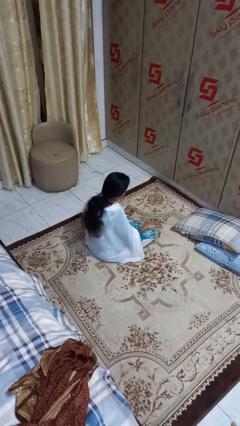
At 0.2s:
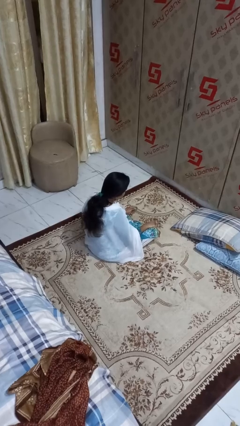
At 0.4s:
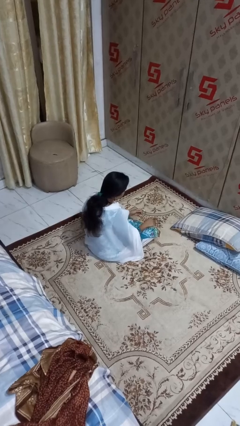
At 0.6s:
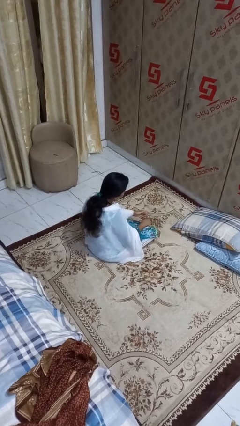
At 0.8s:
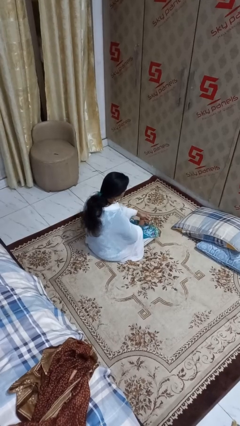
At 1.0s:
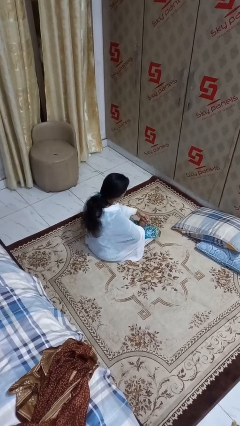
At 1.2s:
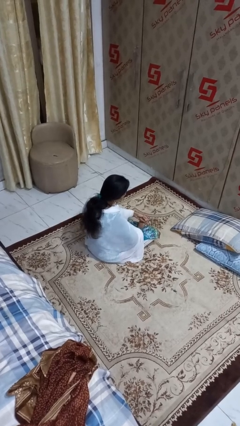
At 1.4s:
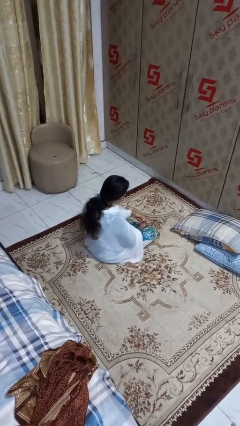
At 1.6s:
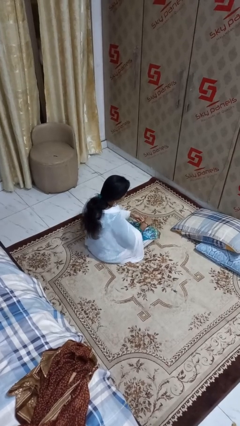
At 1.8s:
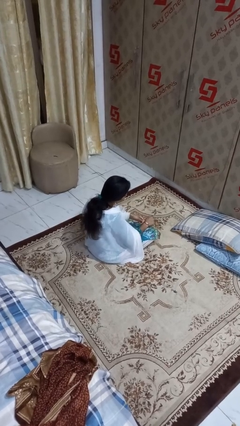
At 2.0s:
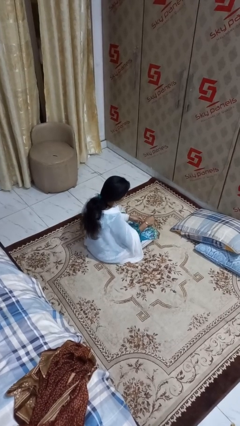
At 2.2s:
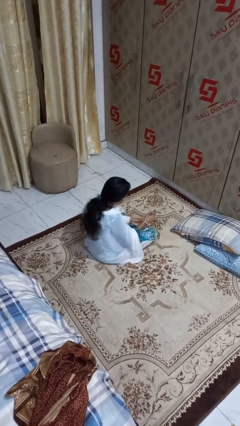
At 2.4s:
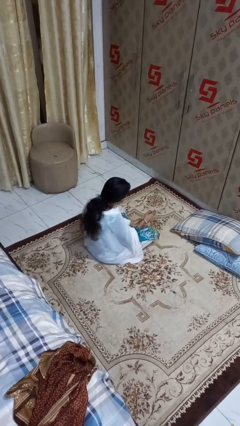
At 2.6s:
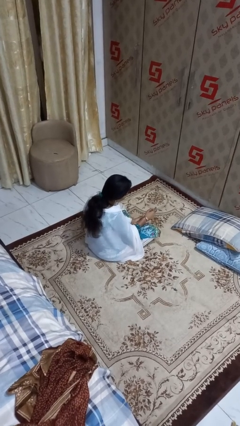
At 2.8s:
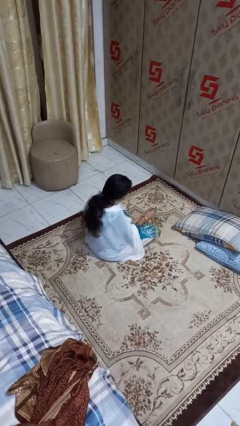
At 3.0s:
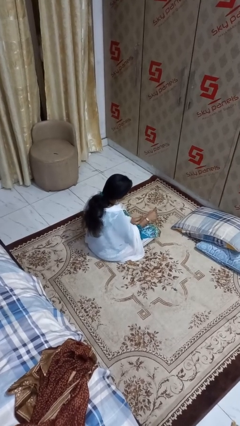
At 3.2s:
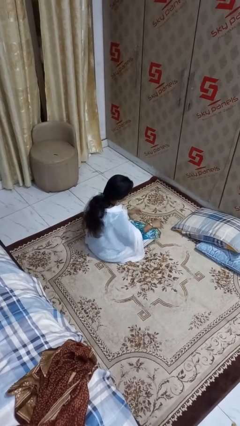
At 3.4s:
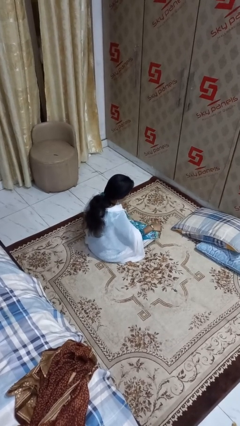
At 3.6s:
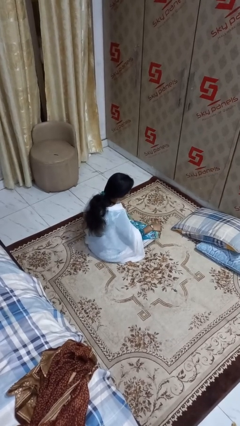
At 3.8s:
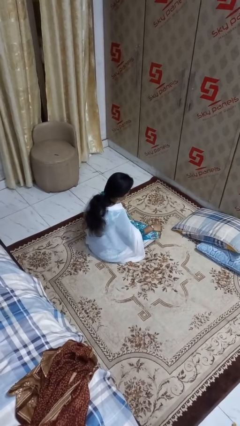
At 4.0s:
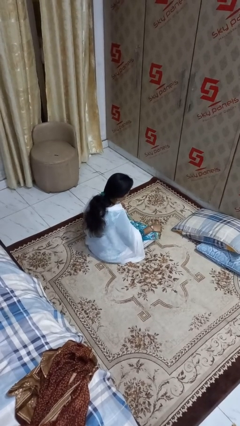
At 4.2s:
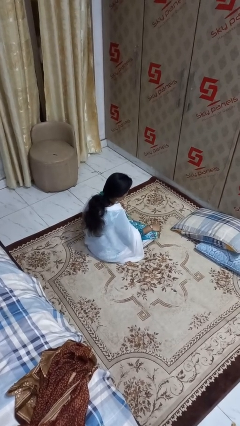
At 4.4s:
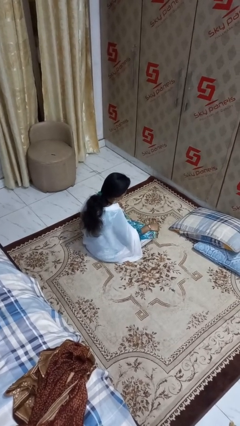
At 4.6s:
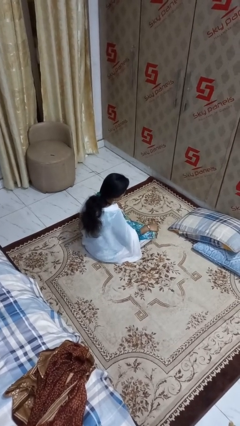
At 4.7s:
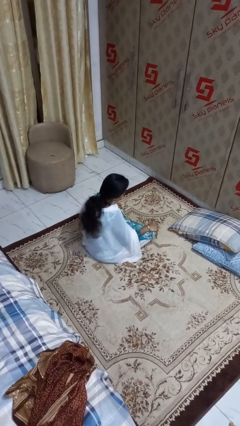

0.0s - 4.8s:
person puts on wristwatch

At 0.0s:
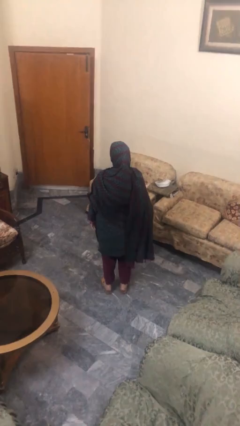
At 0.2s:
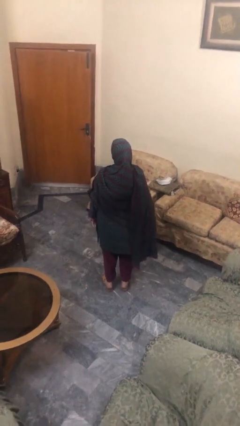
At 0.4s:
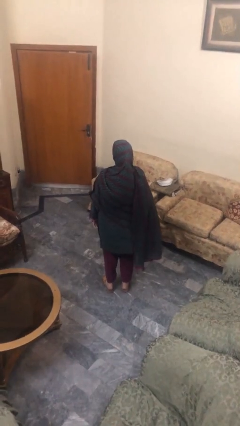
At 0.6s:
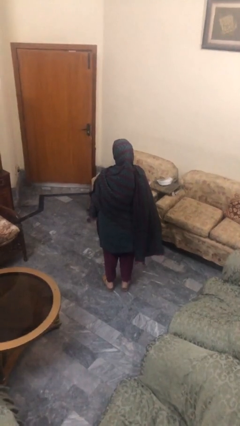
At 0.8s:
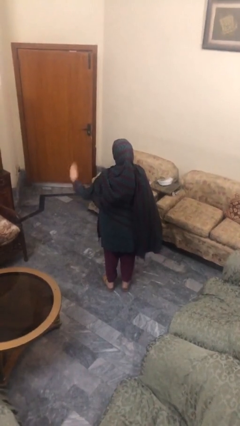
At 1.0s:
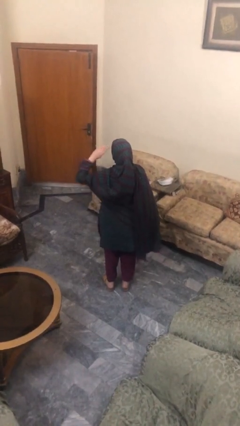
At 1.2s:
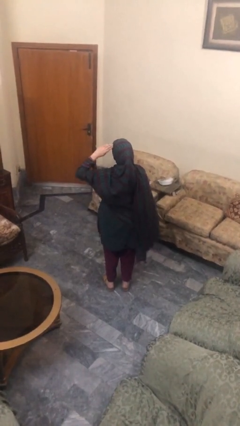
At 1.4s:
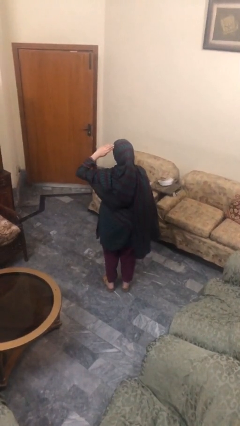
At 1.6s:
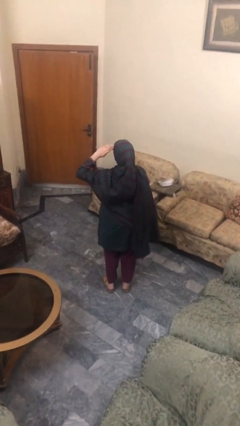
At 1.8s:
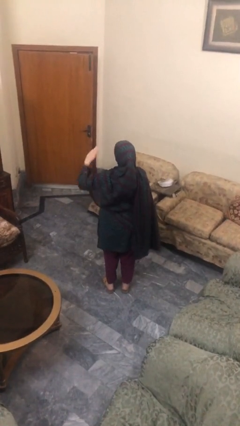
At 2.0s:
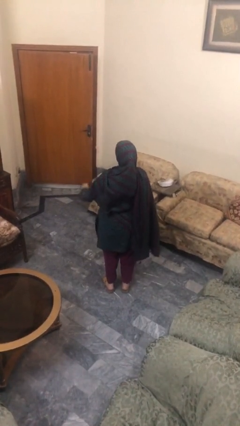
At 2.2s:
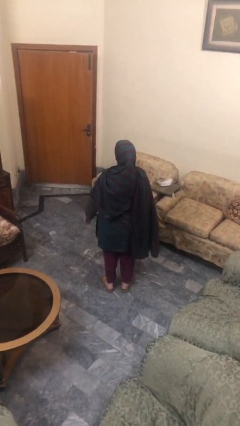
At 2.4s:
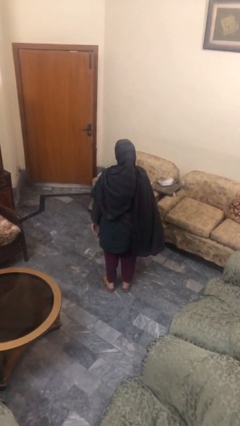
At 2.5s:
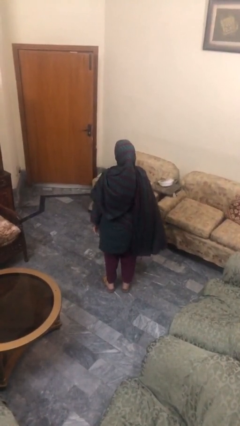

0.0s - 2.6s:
person salutes

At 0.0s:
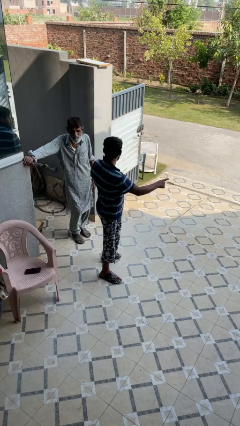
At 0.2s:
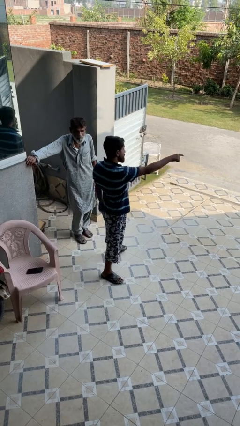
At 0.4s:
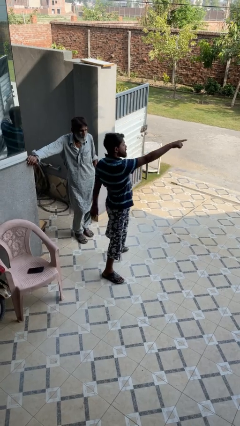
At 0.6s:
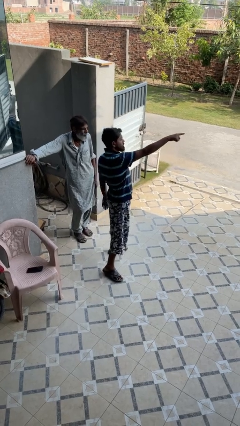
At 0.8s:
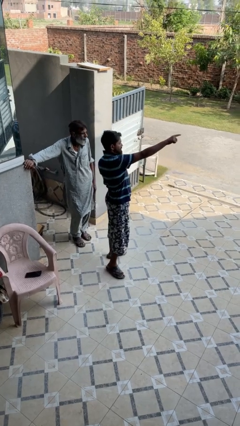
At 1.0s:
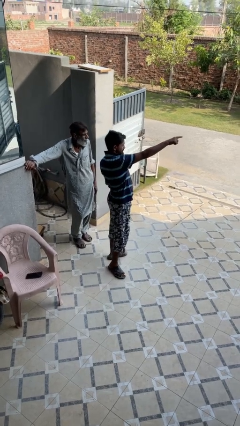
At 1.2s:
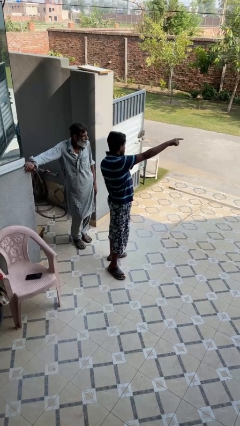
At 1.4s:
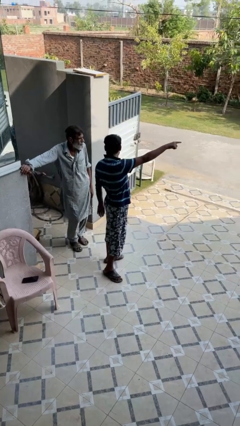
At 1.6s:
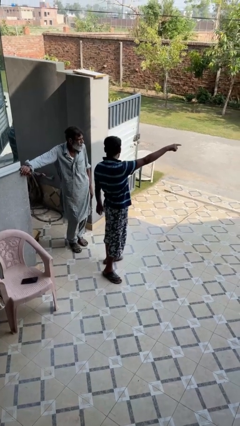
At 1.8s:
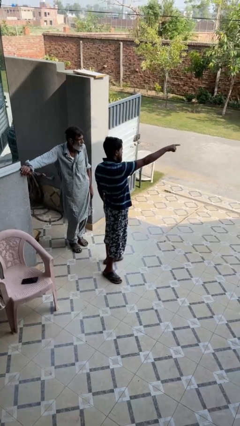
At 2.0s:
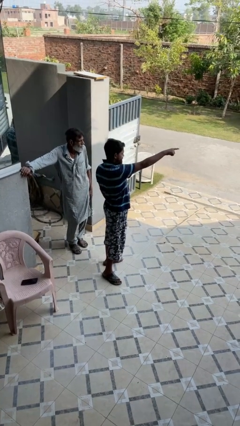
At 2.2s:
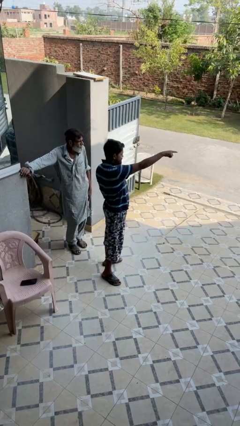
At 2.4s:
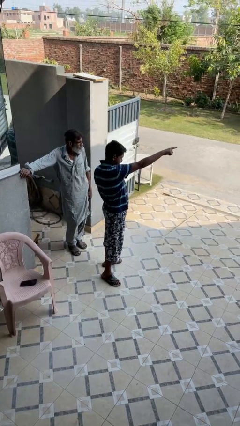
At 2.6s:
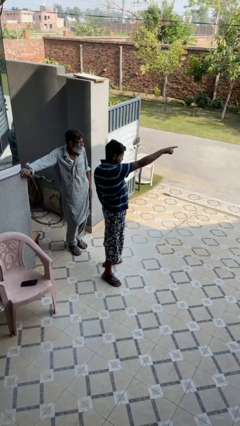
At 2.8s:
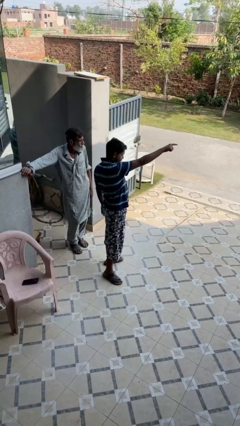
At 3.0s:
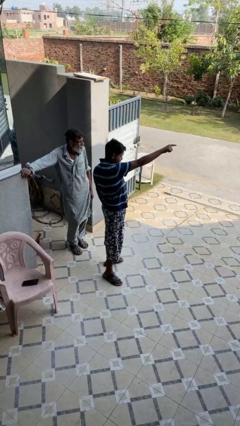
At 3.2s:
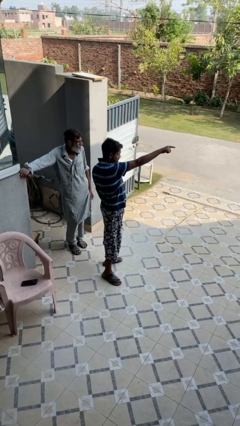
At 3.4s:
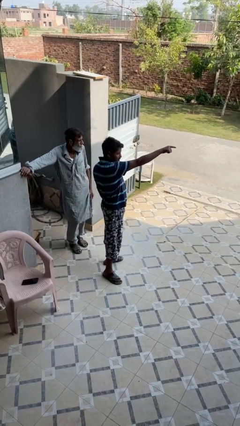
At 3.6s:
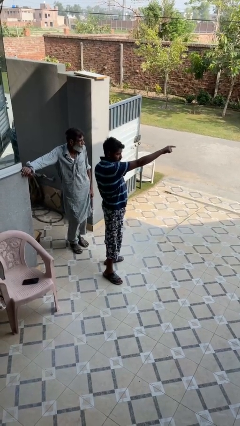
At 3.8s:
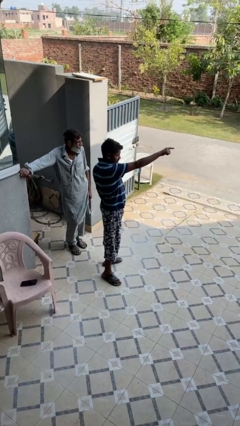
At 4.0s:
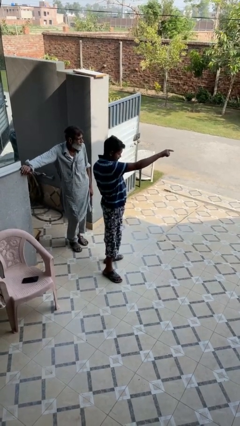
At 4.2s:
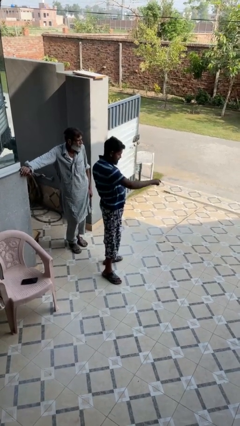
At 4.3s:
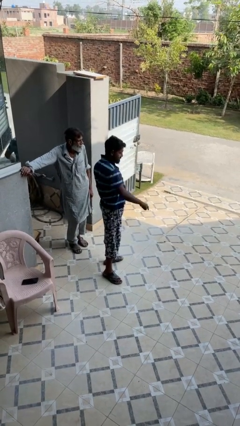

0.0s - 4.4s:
person points at person

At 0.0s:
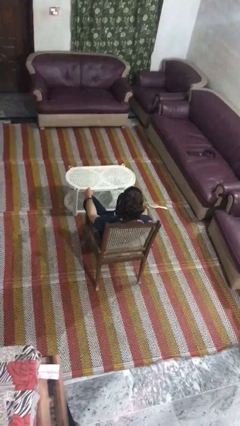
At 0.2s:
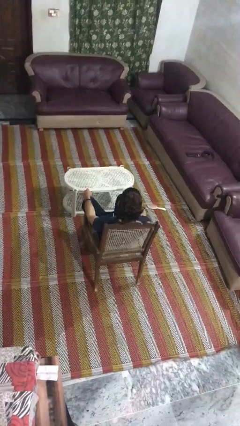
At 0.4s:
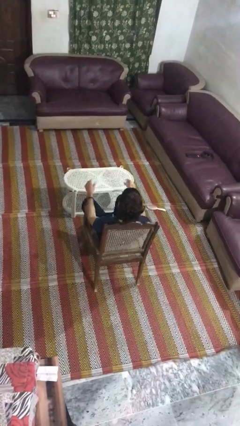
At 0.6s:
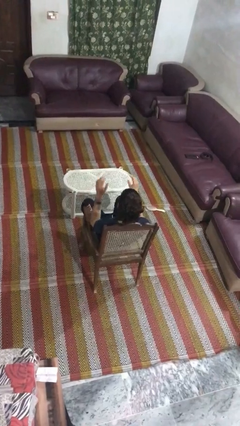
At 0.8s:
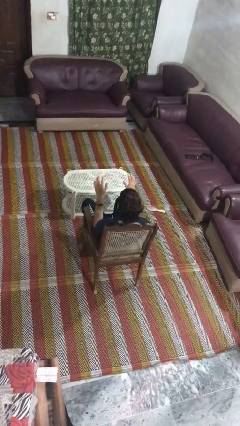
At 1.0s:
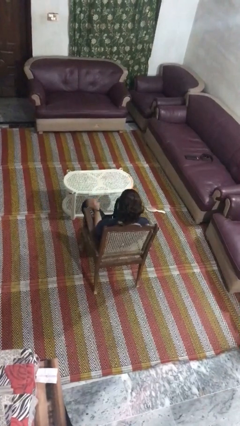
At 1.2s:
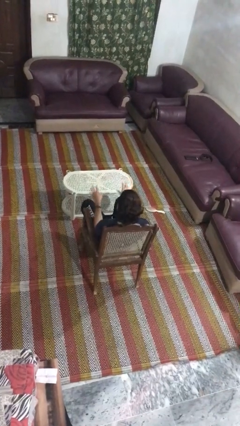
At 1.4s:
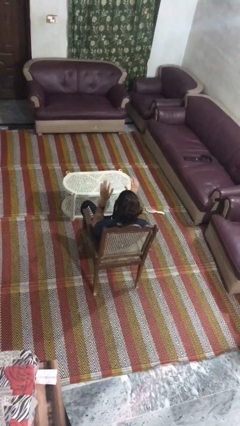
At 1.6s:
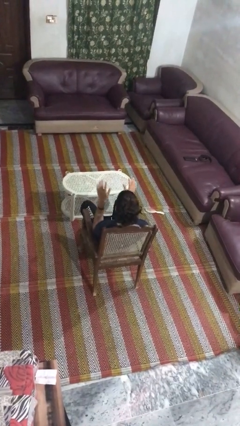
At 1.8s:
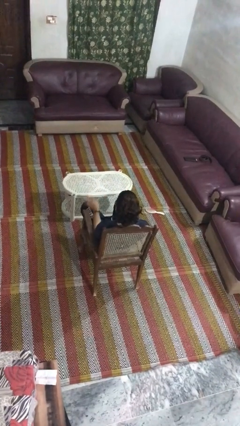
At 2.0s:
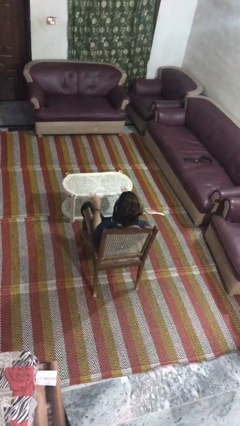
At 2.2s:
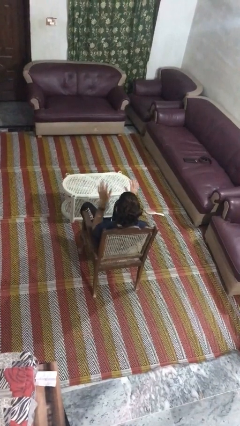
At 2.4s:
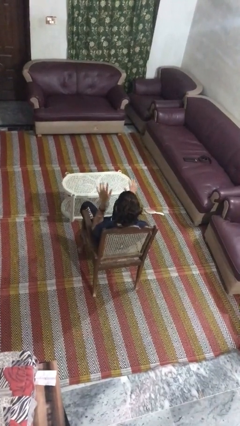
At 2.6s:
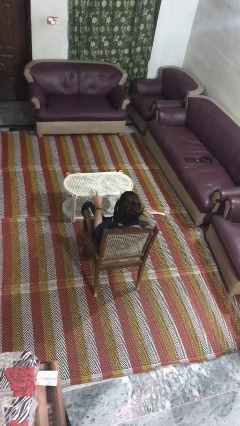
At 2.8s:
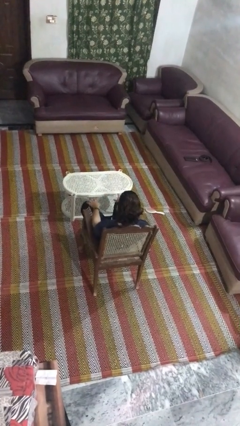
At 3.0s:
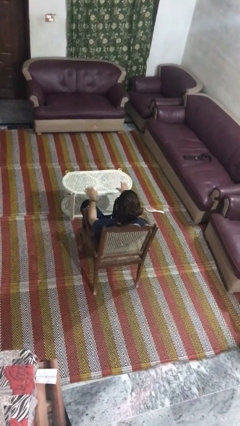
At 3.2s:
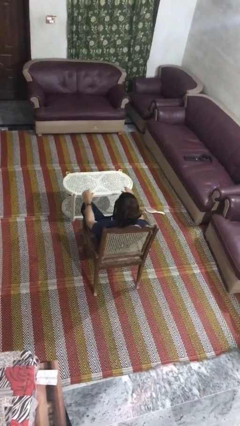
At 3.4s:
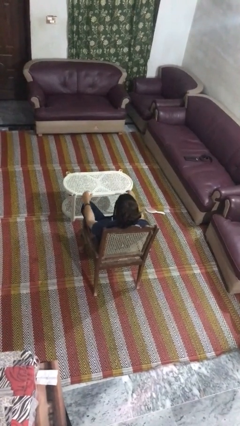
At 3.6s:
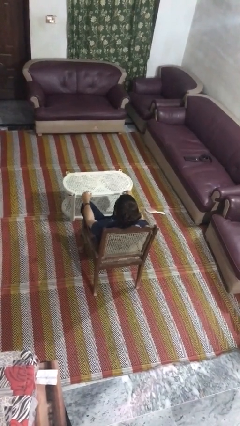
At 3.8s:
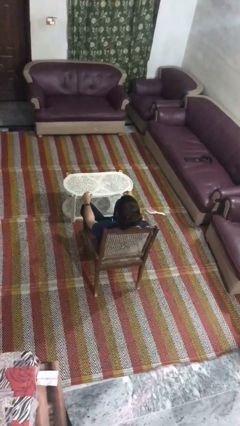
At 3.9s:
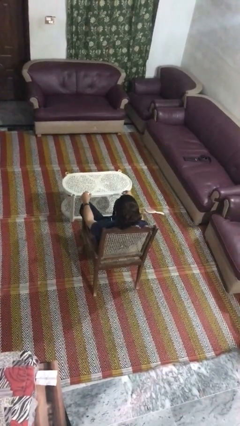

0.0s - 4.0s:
person slaps hands on thighs

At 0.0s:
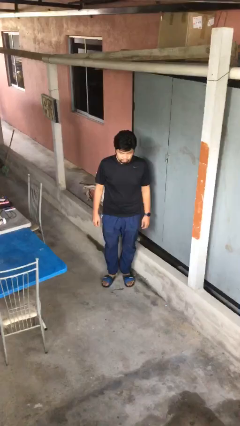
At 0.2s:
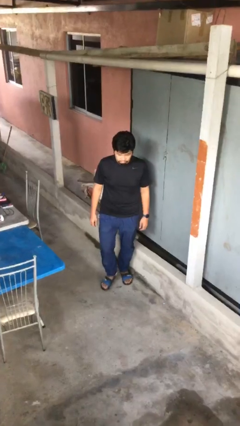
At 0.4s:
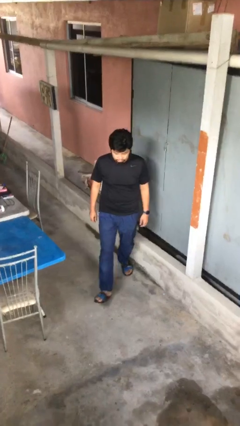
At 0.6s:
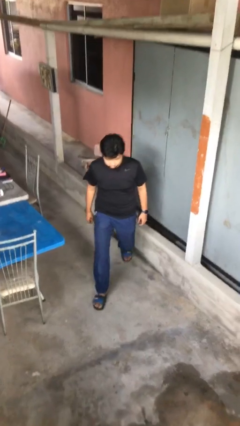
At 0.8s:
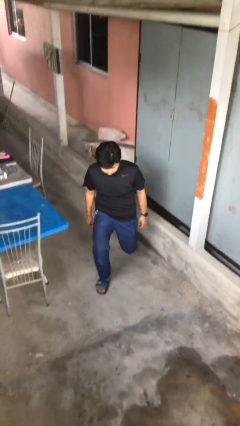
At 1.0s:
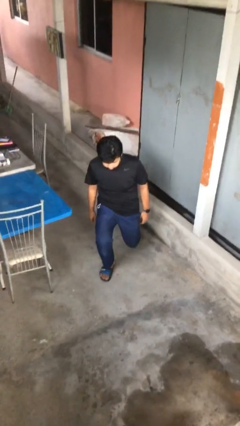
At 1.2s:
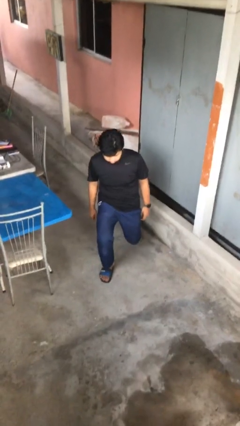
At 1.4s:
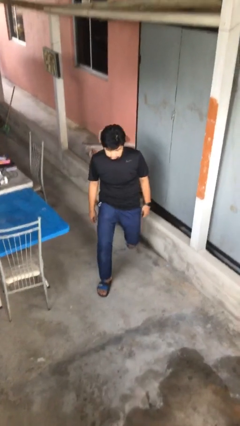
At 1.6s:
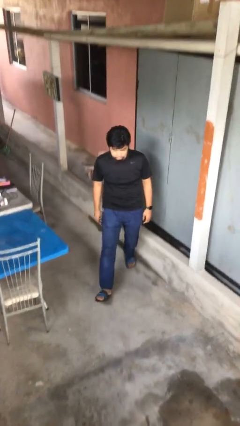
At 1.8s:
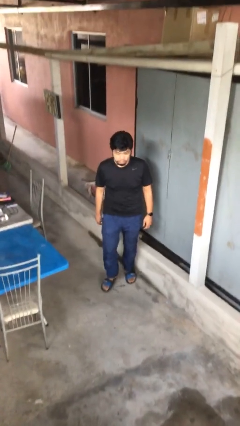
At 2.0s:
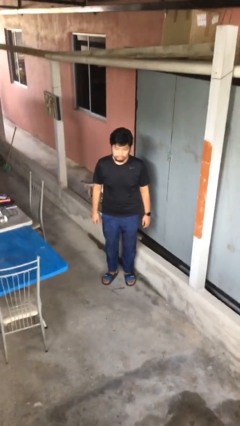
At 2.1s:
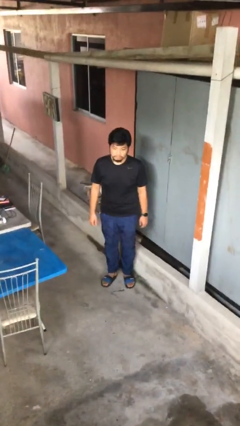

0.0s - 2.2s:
person exercises with lunges
